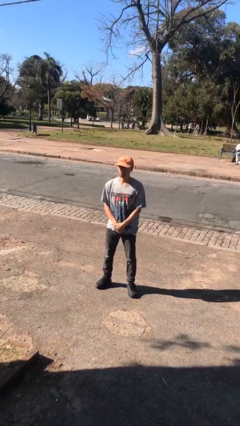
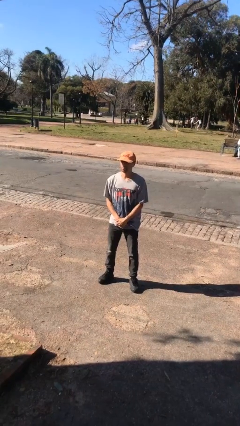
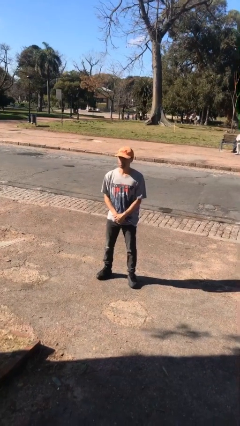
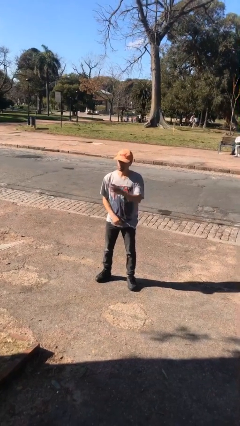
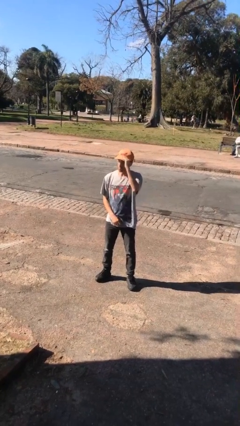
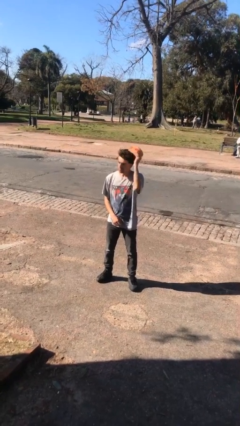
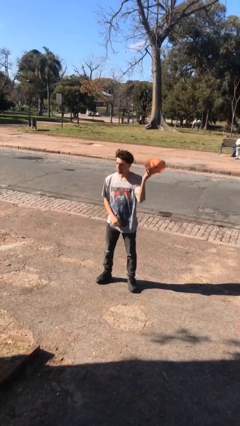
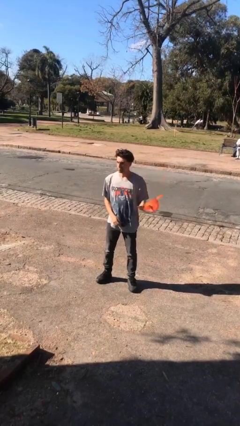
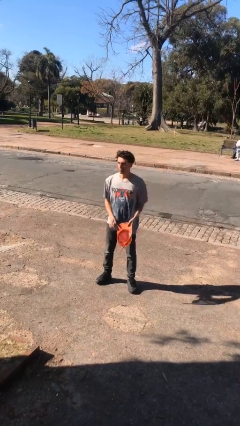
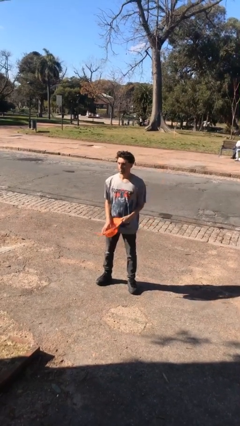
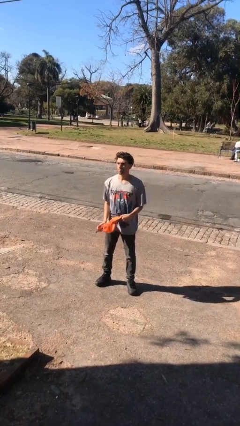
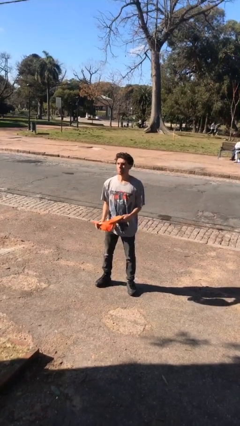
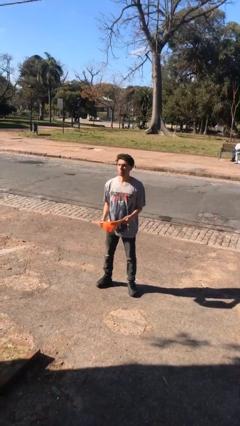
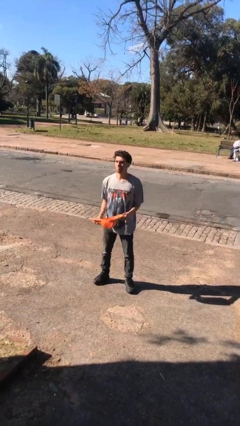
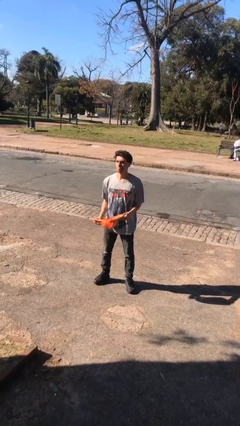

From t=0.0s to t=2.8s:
person takes off hat

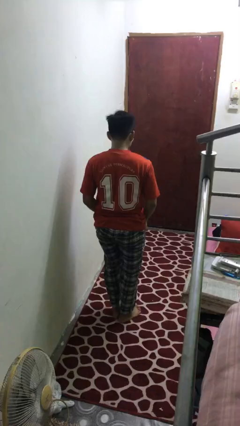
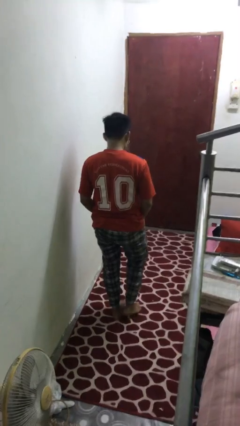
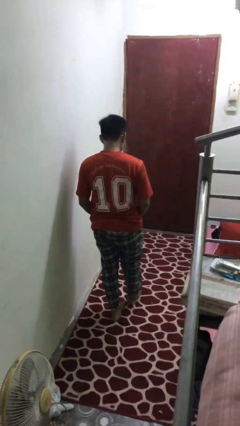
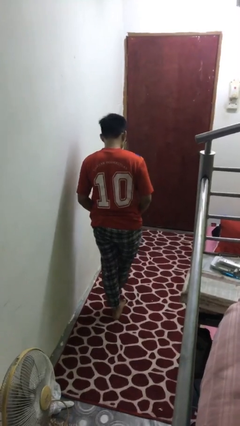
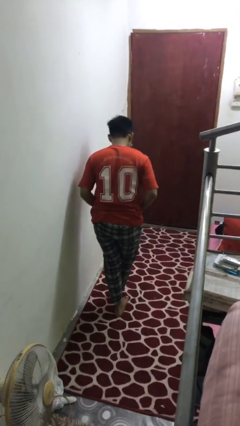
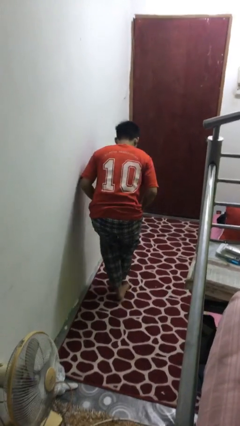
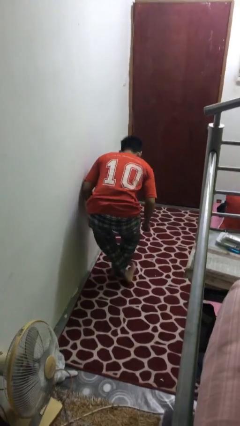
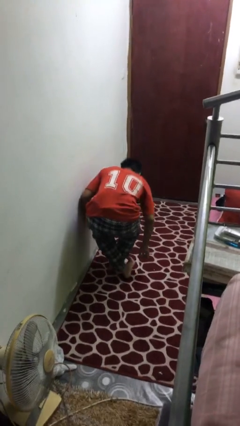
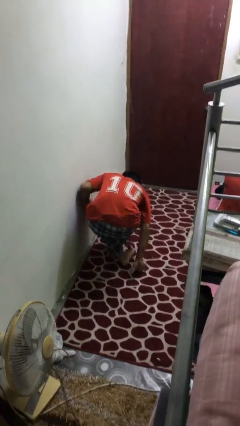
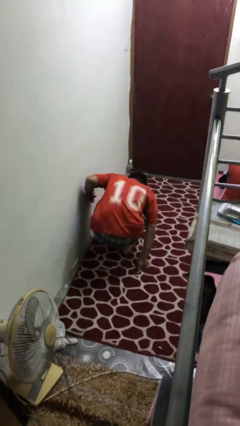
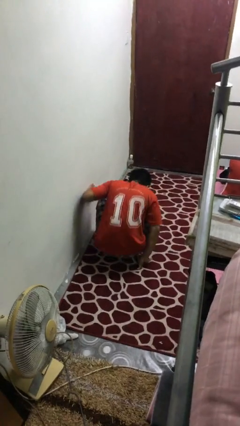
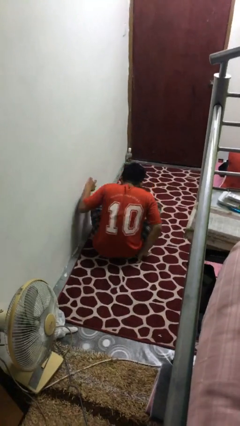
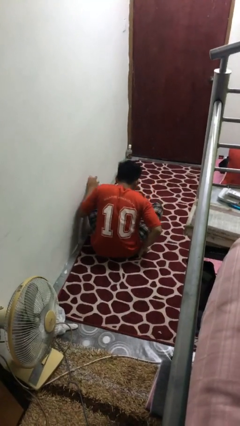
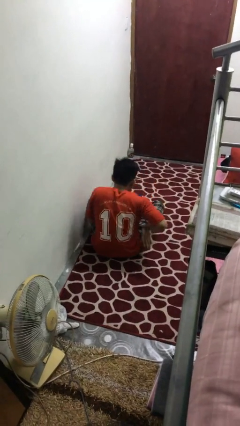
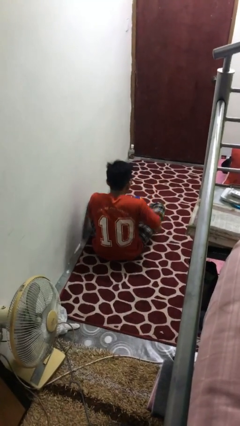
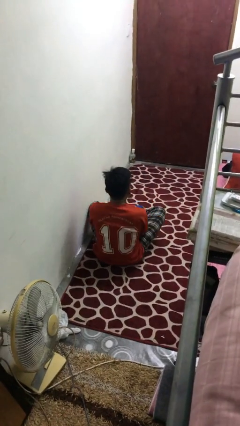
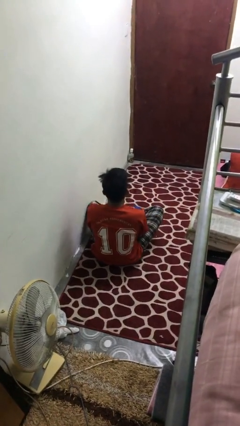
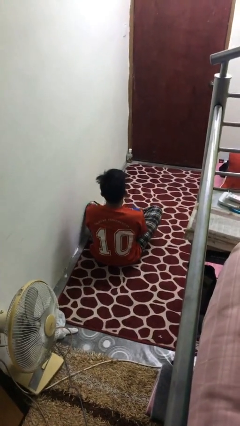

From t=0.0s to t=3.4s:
person sits crisscross

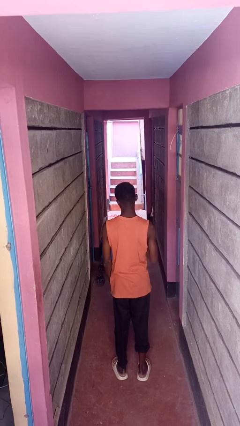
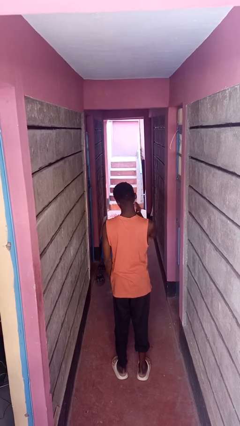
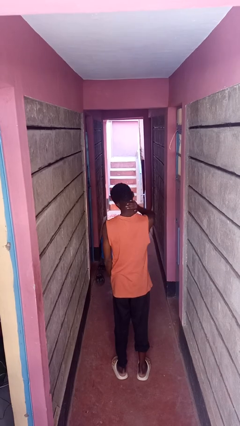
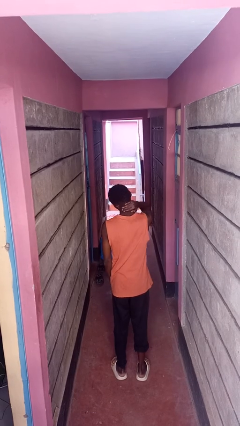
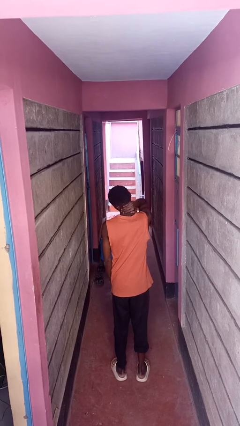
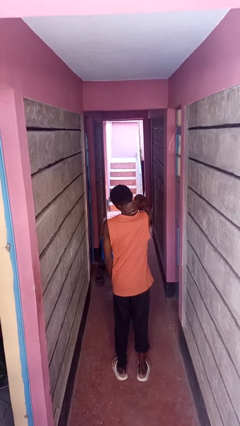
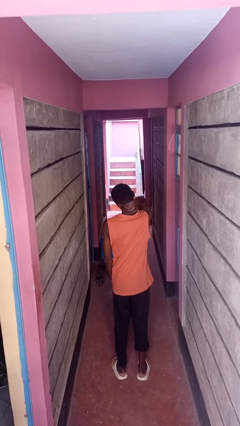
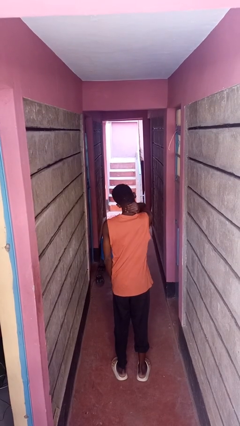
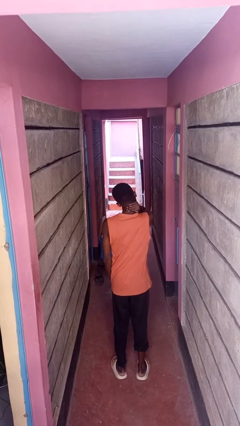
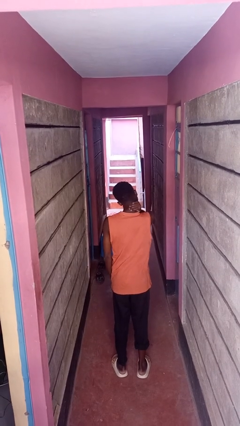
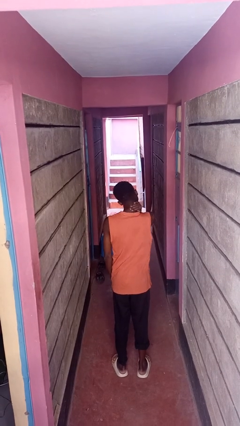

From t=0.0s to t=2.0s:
person rubs neck

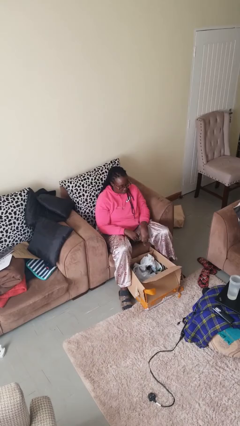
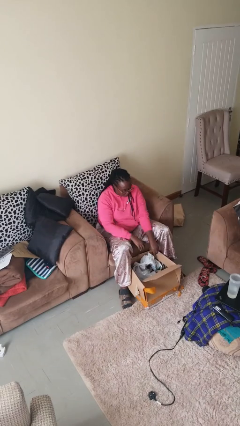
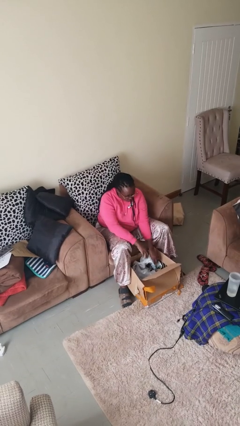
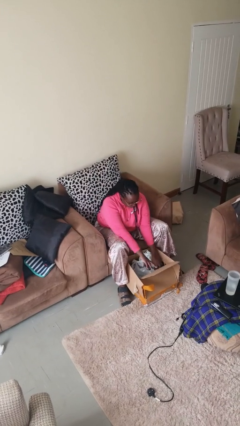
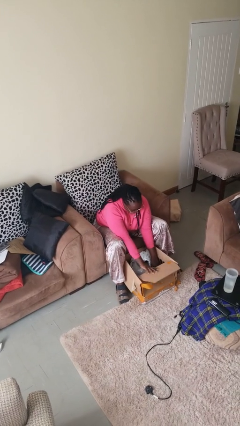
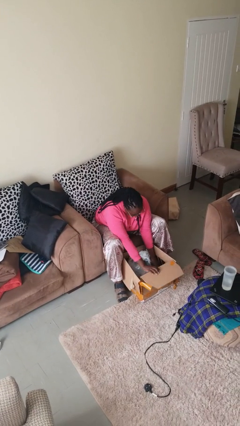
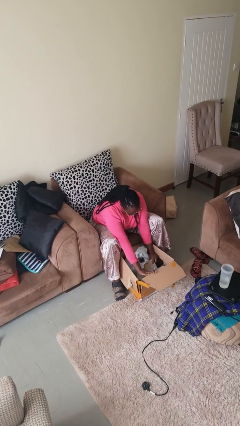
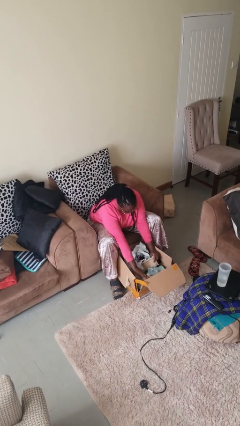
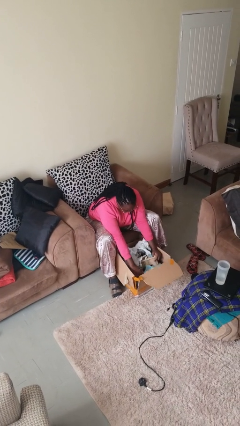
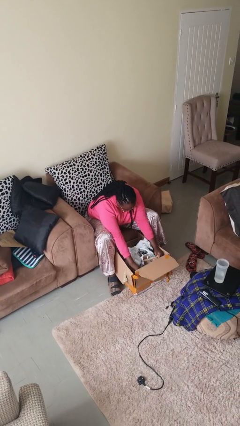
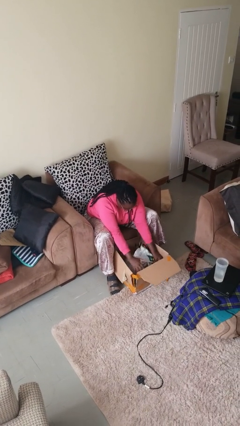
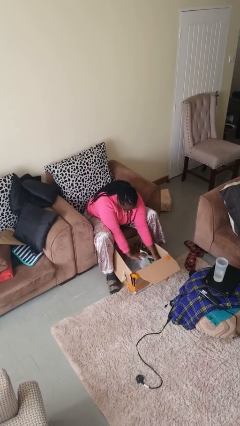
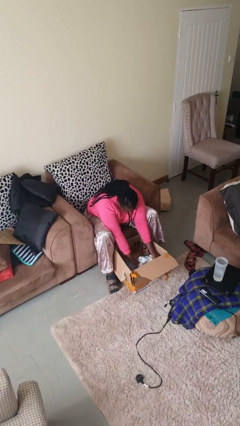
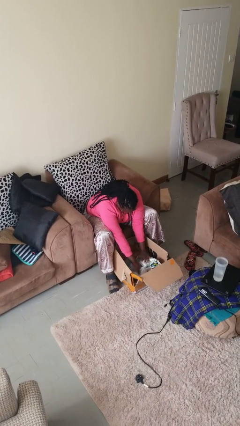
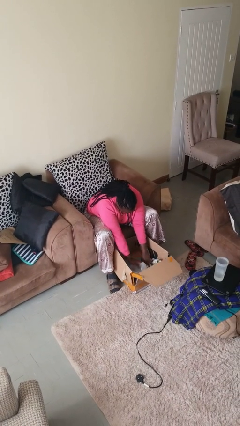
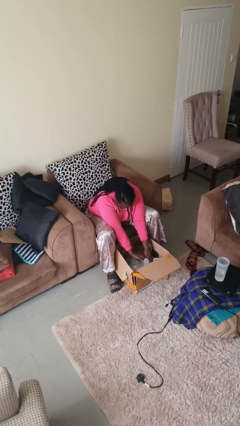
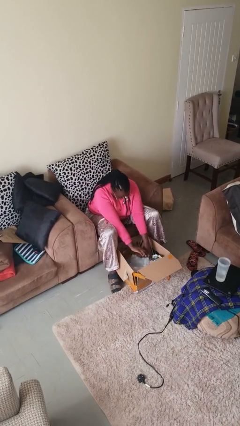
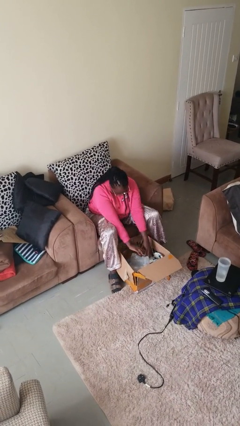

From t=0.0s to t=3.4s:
person searches in box

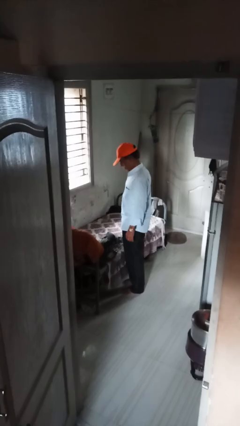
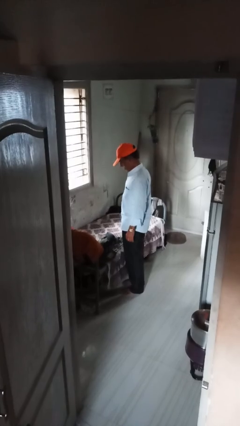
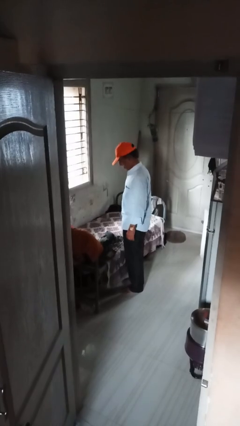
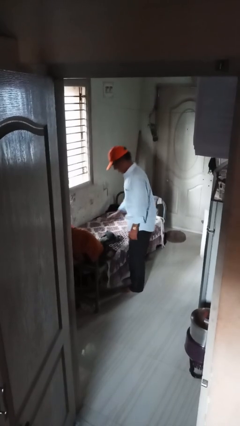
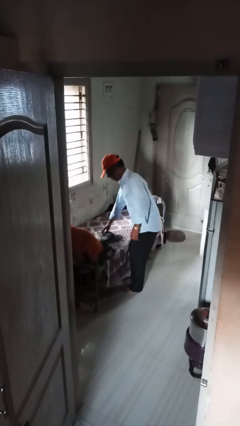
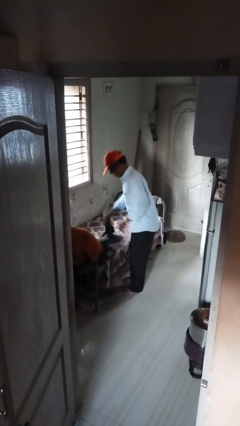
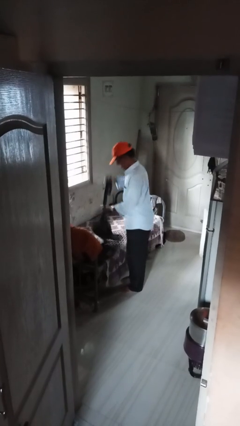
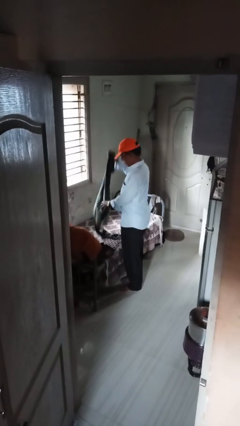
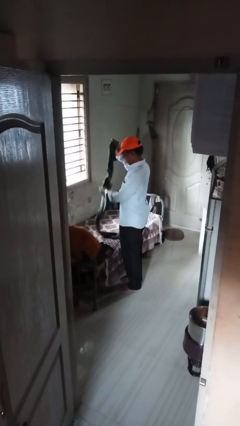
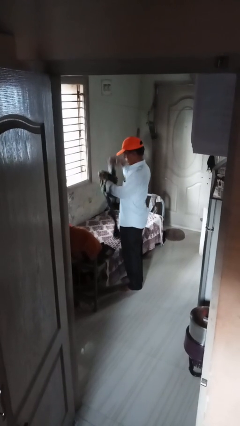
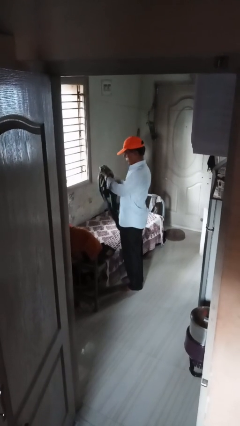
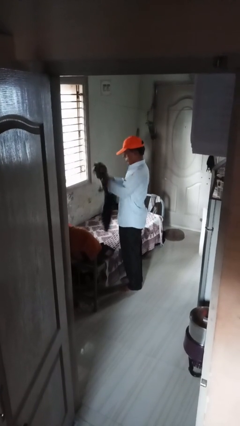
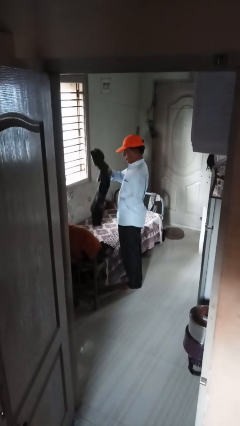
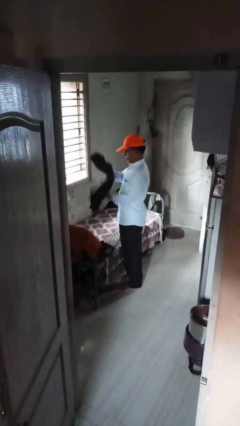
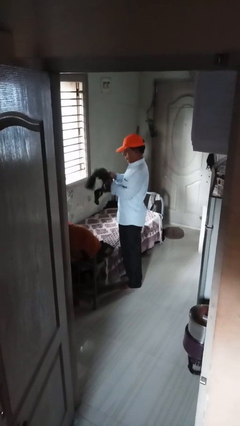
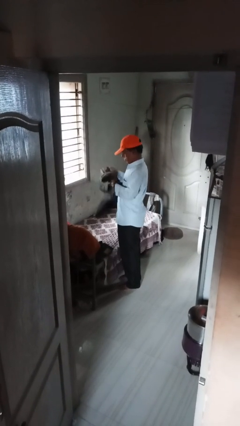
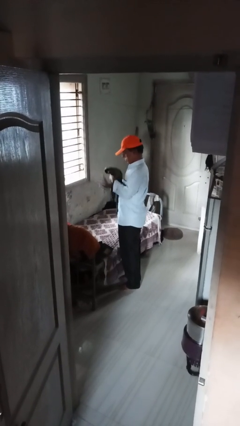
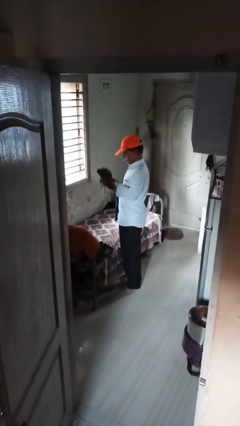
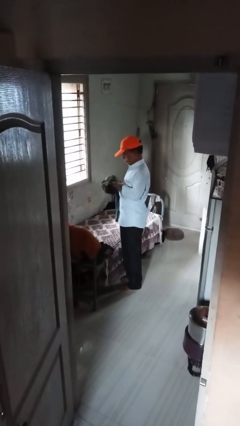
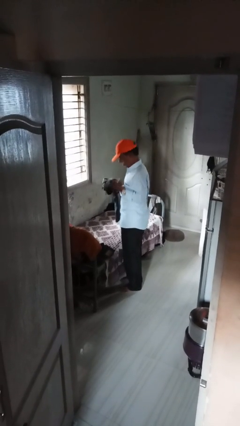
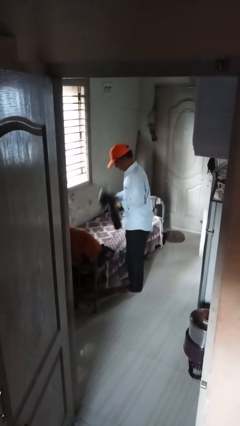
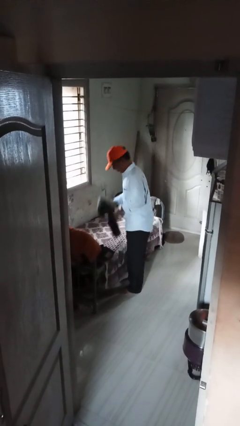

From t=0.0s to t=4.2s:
person folds shirt

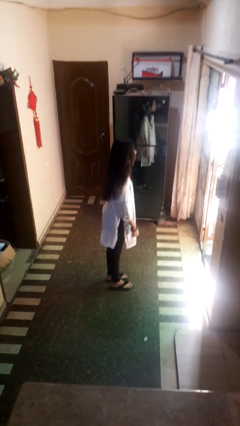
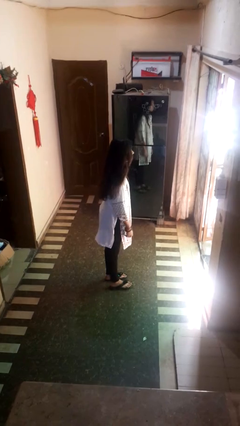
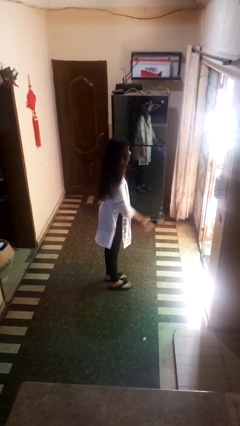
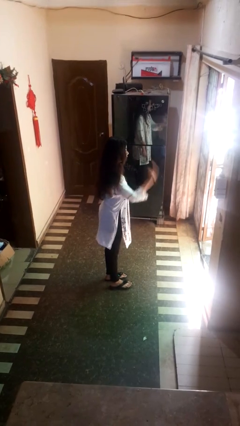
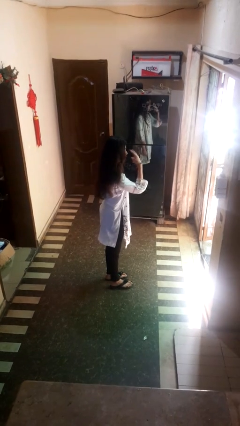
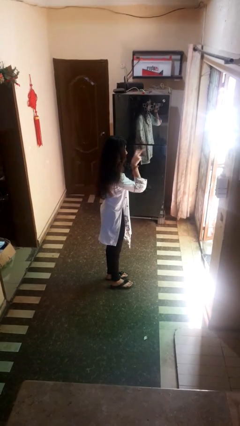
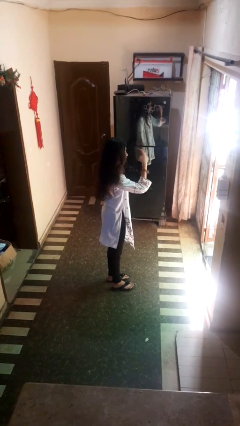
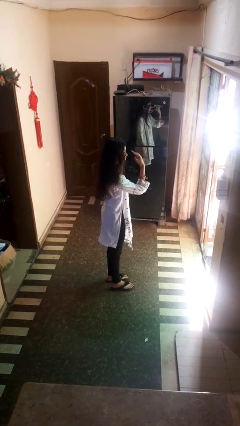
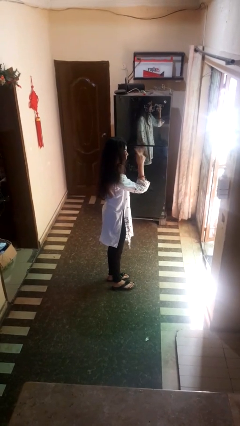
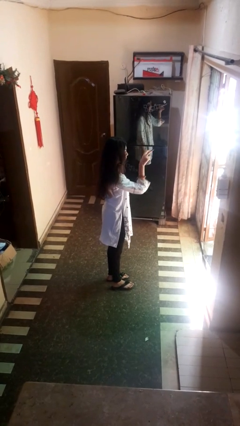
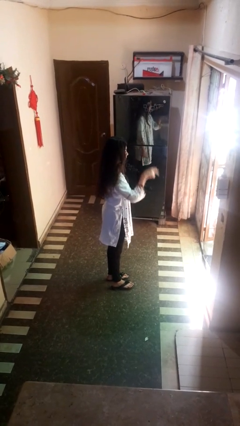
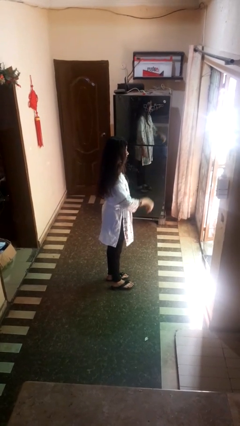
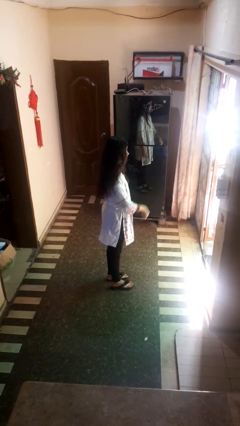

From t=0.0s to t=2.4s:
person gestures watch closely
